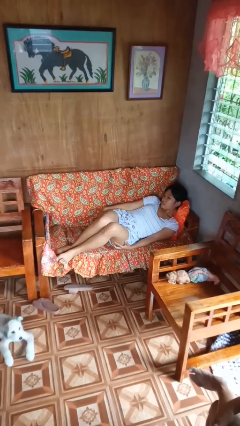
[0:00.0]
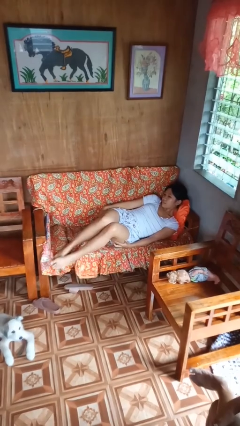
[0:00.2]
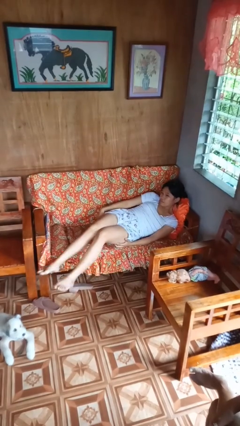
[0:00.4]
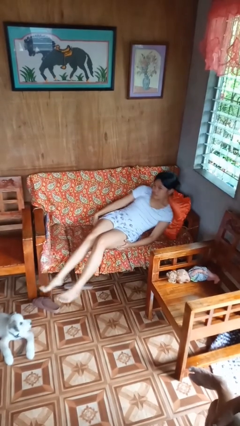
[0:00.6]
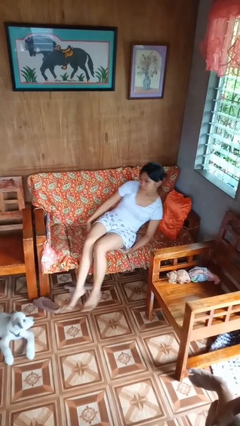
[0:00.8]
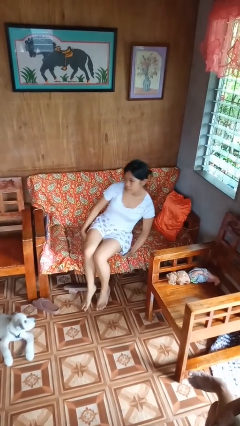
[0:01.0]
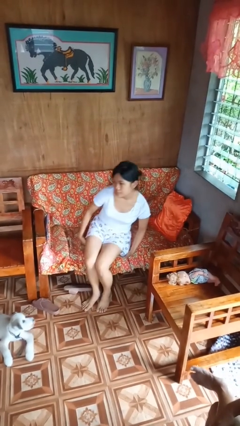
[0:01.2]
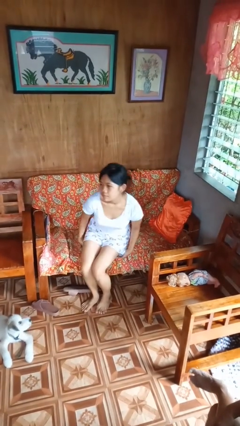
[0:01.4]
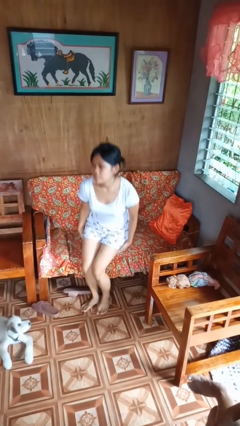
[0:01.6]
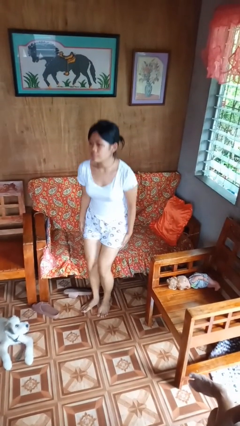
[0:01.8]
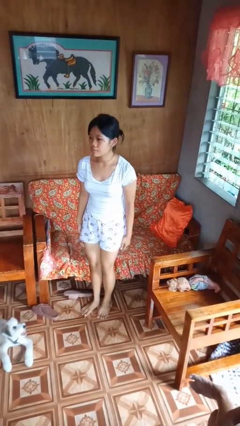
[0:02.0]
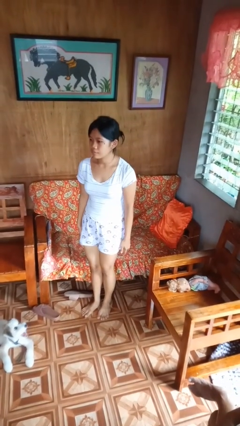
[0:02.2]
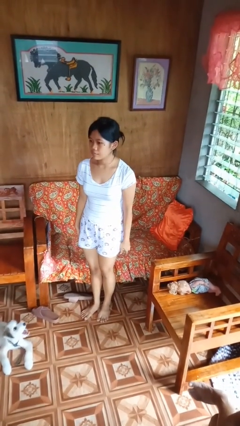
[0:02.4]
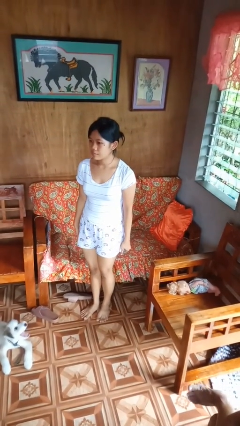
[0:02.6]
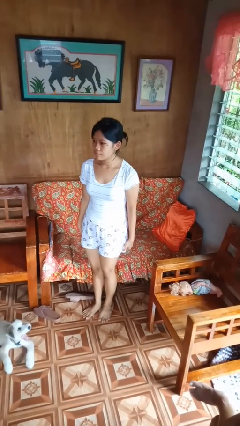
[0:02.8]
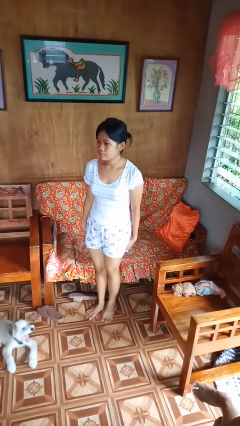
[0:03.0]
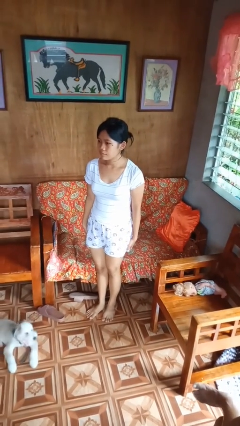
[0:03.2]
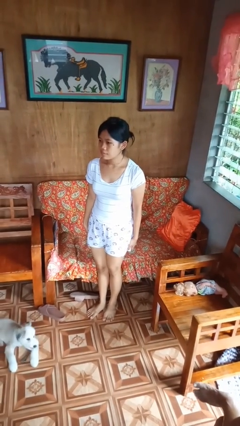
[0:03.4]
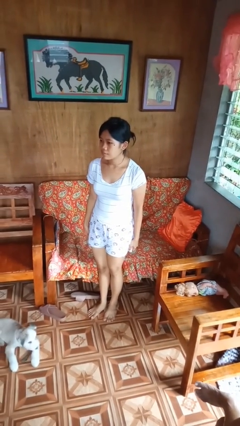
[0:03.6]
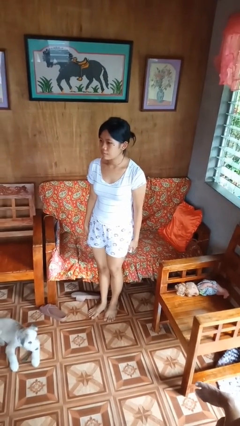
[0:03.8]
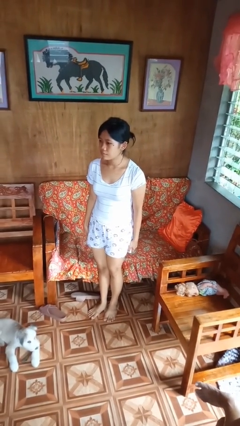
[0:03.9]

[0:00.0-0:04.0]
person stands up

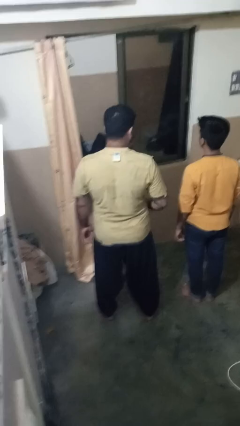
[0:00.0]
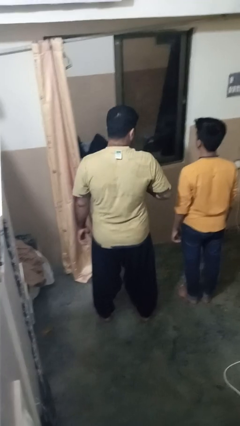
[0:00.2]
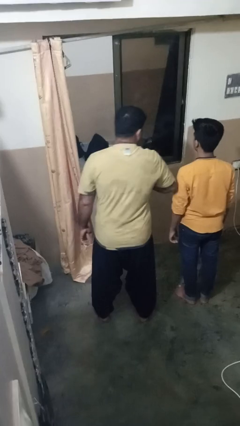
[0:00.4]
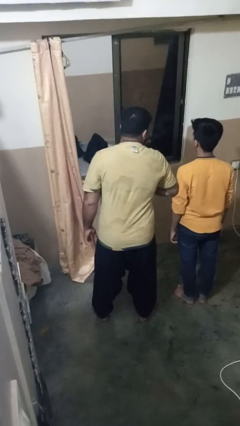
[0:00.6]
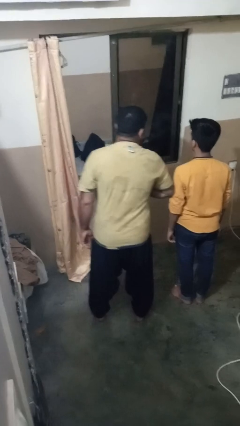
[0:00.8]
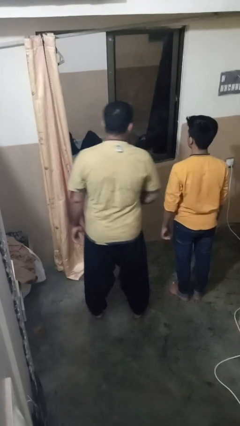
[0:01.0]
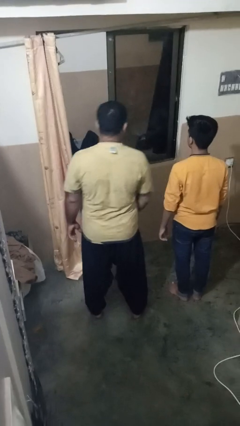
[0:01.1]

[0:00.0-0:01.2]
person nudges person with elbow

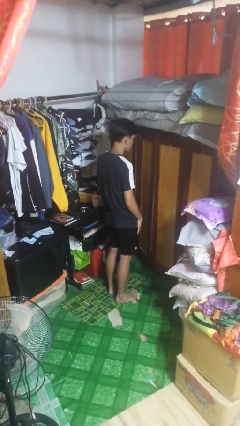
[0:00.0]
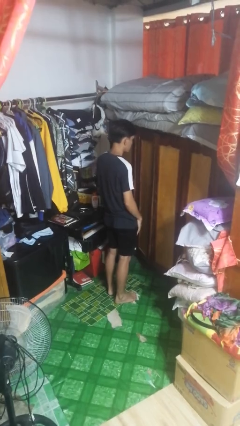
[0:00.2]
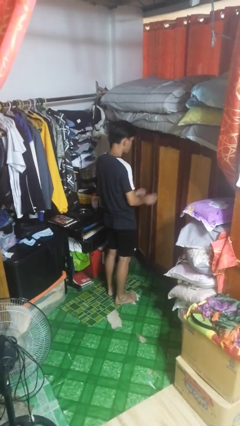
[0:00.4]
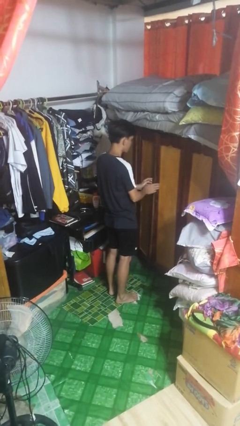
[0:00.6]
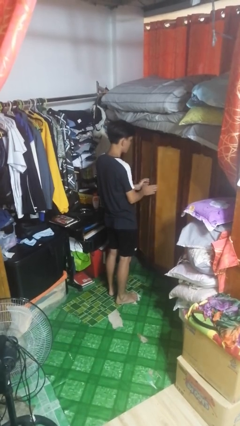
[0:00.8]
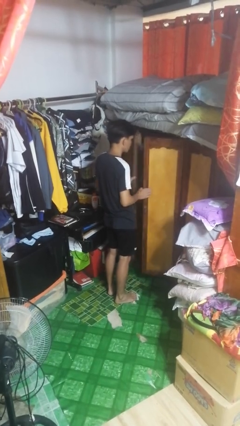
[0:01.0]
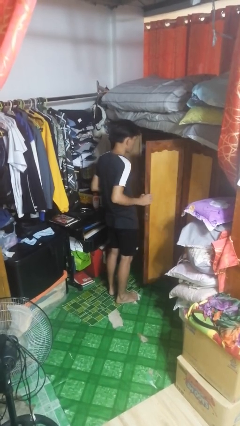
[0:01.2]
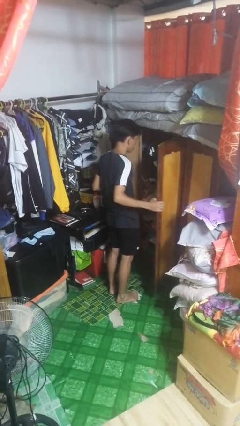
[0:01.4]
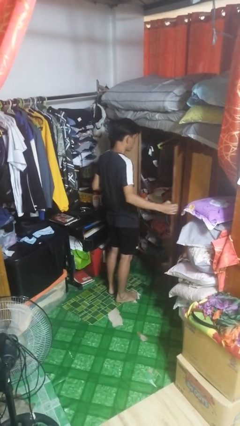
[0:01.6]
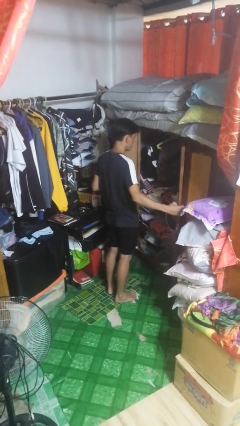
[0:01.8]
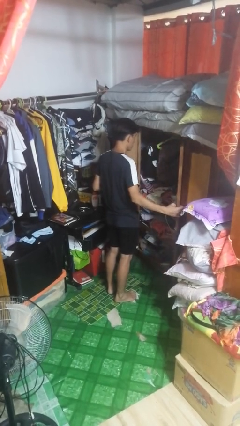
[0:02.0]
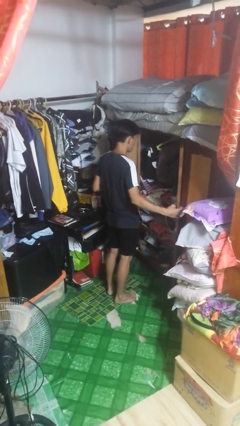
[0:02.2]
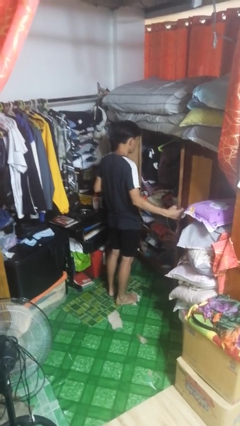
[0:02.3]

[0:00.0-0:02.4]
person opens dresser drawer

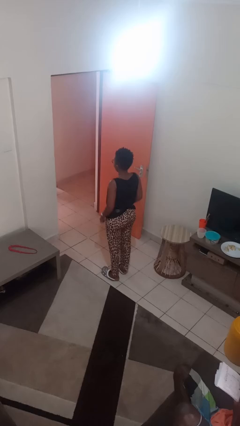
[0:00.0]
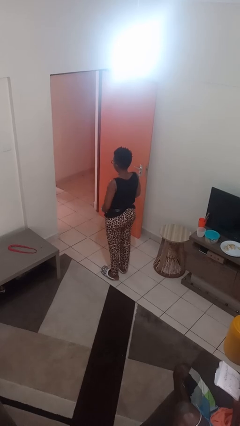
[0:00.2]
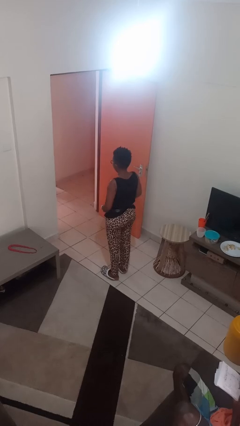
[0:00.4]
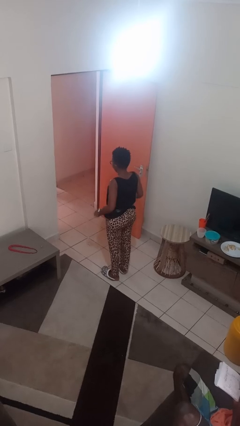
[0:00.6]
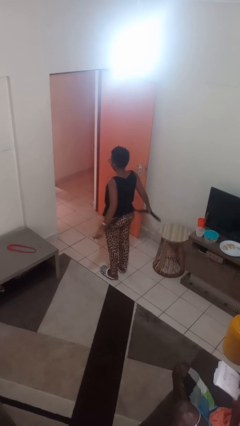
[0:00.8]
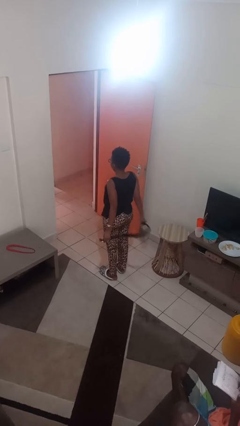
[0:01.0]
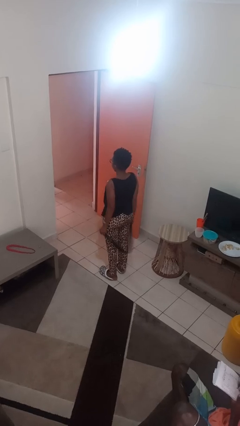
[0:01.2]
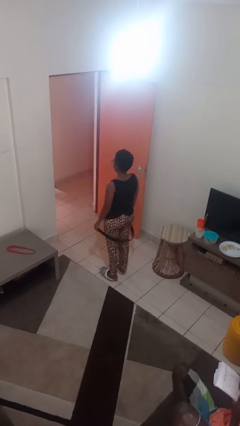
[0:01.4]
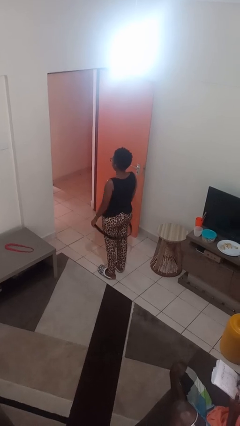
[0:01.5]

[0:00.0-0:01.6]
person takes off belt

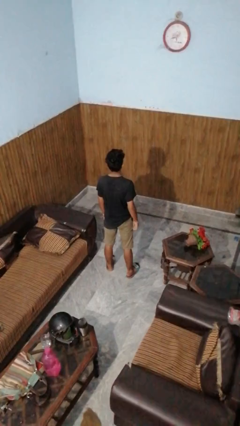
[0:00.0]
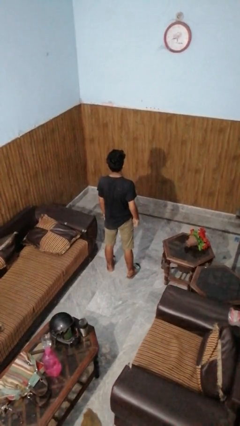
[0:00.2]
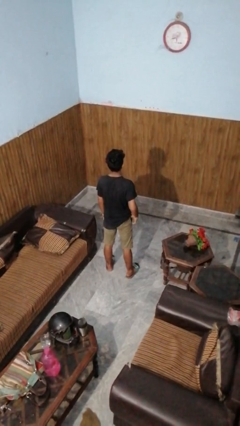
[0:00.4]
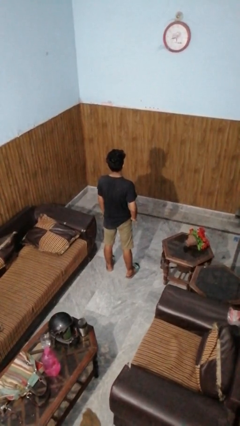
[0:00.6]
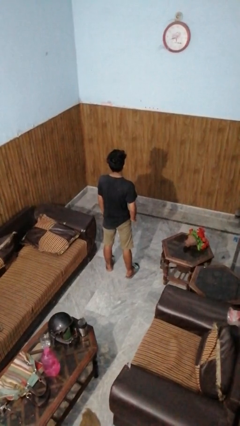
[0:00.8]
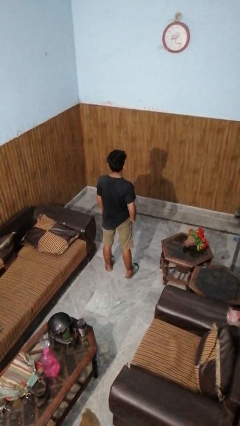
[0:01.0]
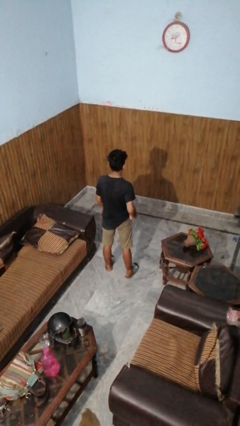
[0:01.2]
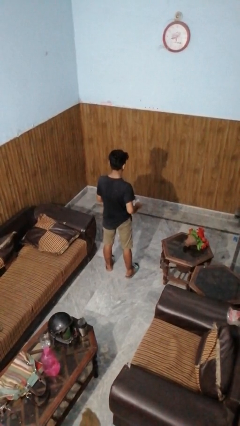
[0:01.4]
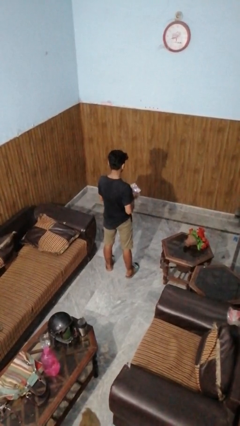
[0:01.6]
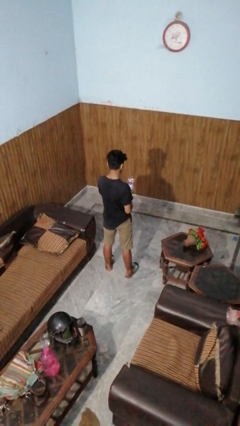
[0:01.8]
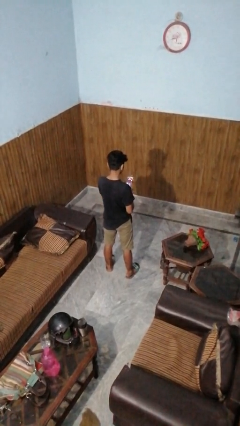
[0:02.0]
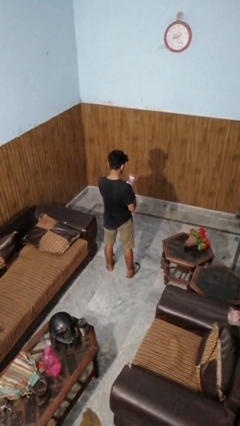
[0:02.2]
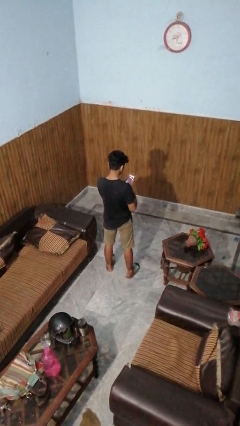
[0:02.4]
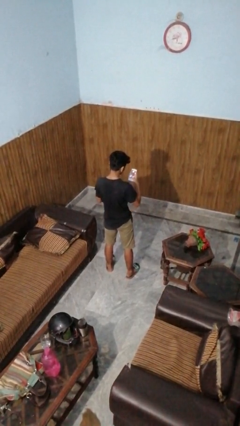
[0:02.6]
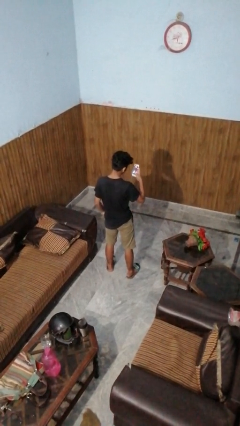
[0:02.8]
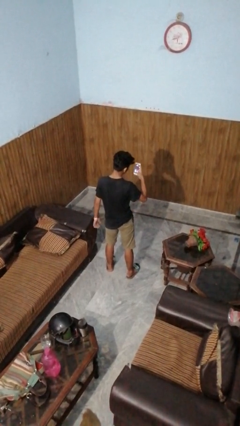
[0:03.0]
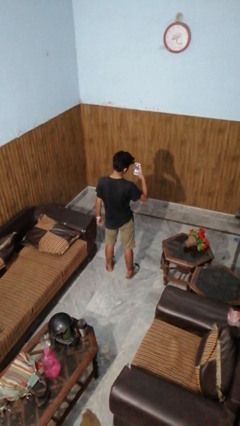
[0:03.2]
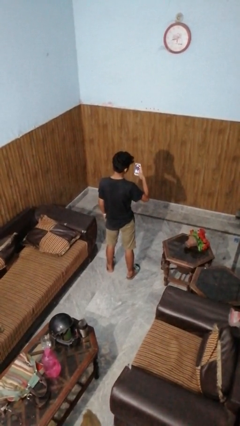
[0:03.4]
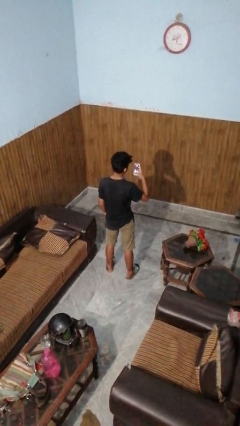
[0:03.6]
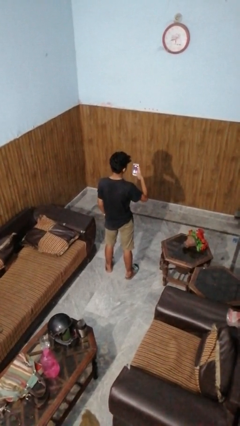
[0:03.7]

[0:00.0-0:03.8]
person takes phone from pocket

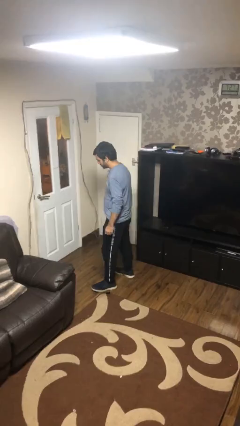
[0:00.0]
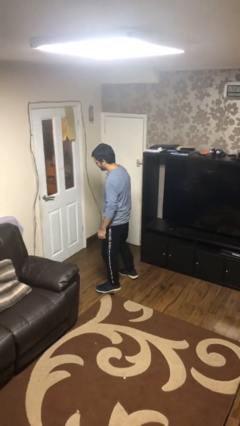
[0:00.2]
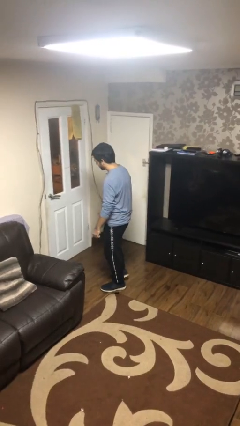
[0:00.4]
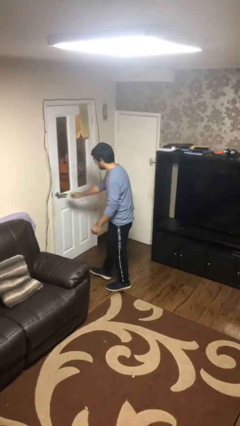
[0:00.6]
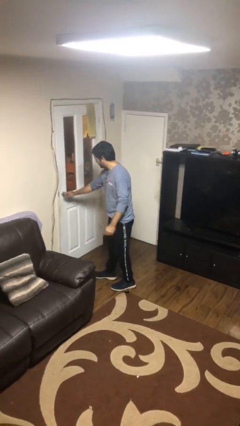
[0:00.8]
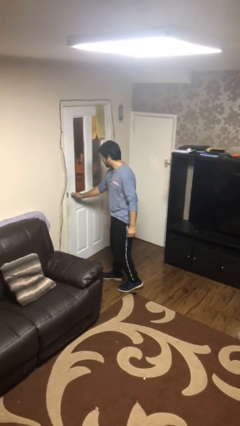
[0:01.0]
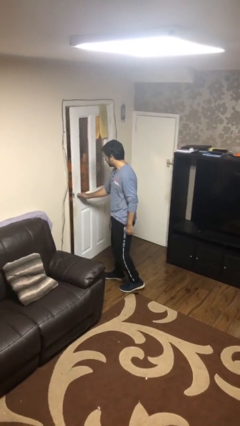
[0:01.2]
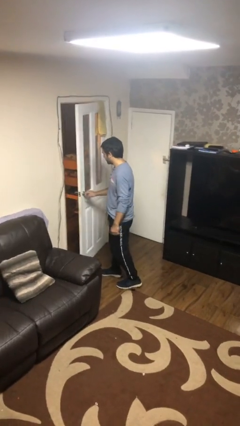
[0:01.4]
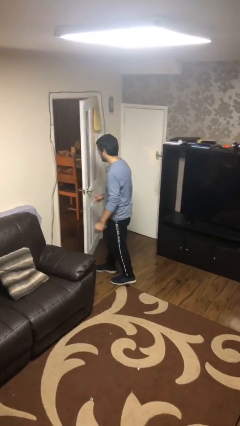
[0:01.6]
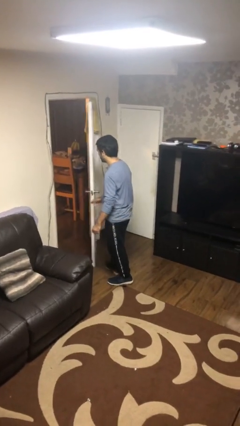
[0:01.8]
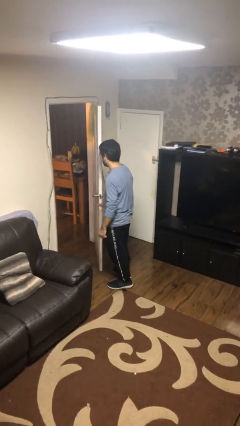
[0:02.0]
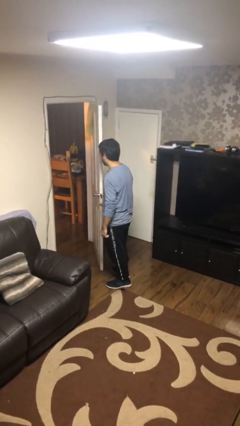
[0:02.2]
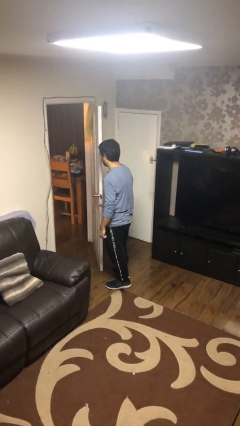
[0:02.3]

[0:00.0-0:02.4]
person opens facility door

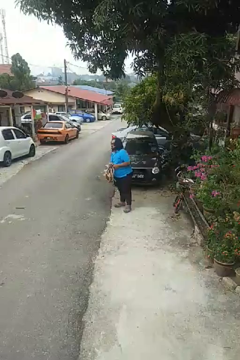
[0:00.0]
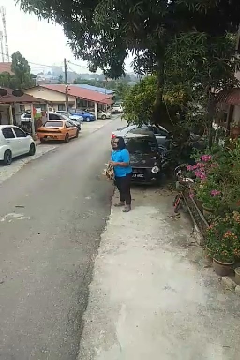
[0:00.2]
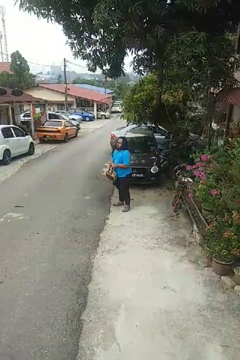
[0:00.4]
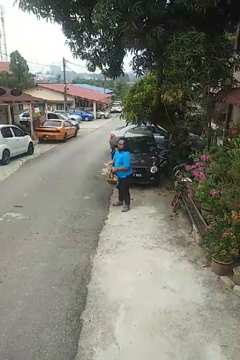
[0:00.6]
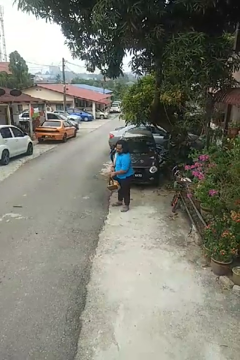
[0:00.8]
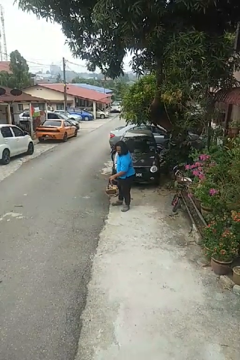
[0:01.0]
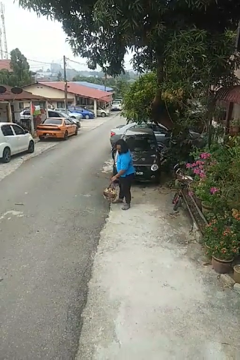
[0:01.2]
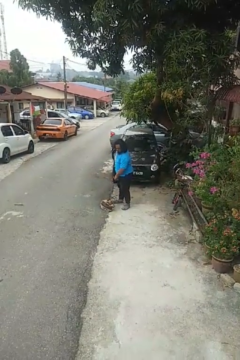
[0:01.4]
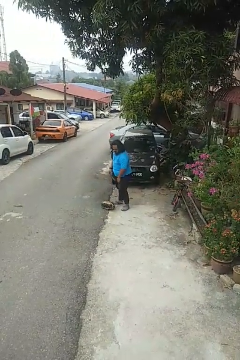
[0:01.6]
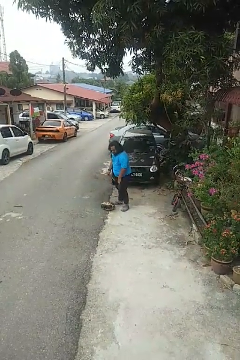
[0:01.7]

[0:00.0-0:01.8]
person drops object

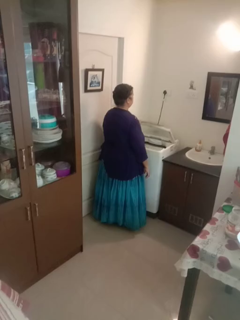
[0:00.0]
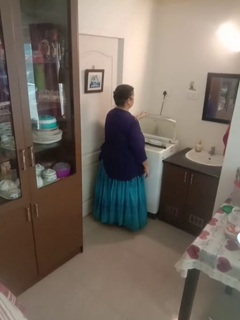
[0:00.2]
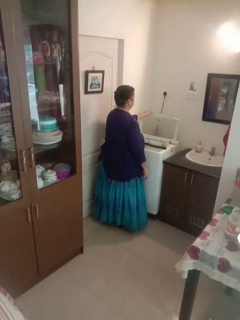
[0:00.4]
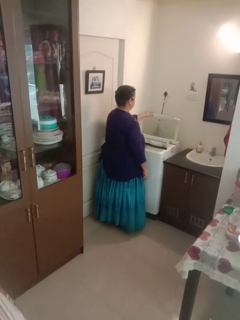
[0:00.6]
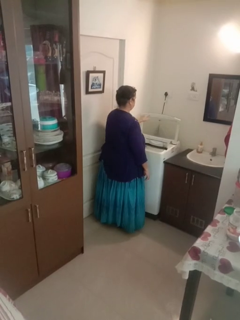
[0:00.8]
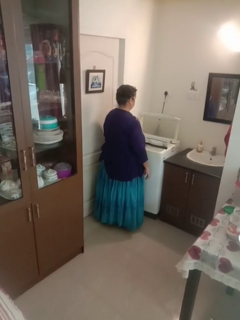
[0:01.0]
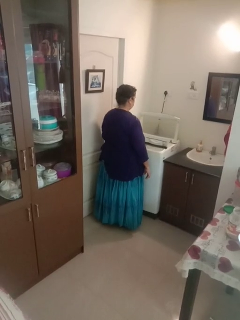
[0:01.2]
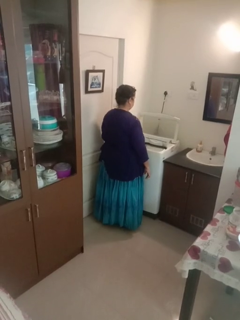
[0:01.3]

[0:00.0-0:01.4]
person opens clothes washer
